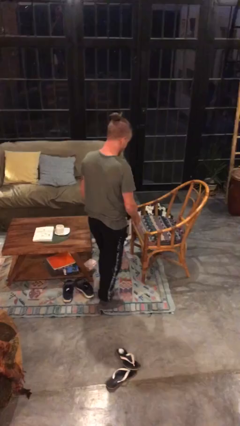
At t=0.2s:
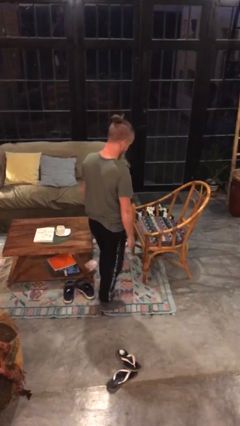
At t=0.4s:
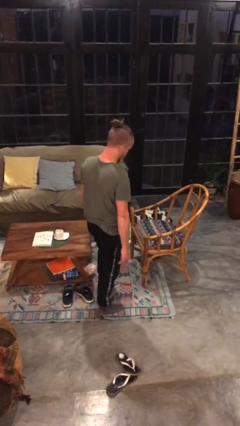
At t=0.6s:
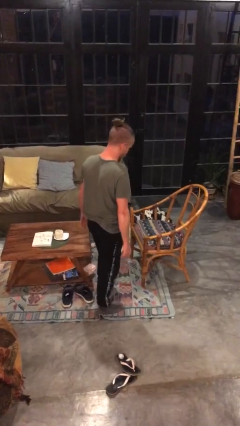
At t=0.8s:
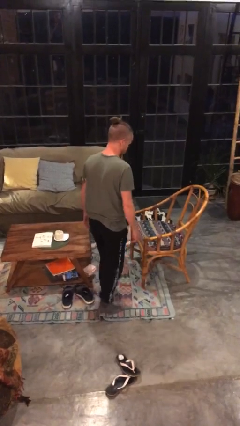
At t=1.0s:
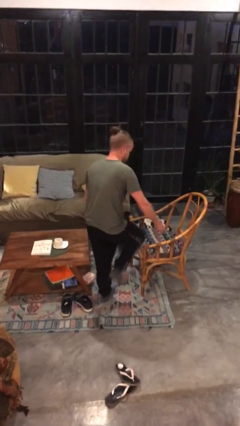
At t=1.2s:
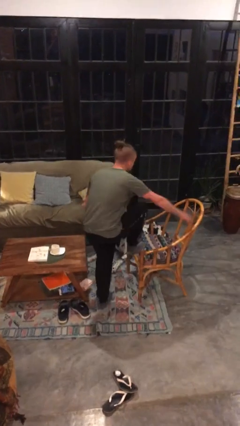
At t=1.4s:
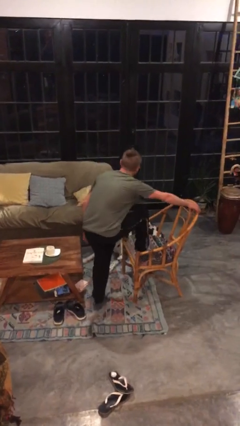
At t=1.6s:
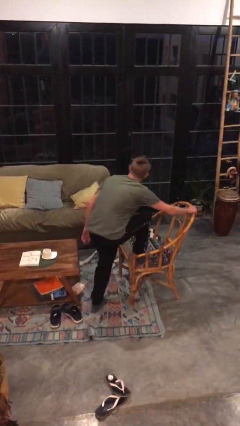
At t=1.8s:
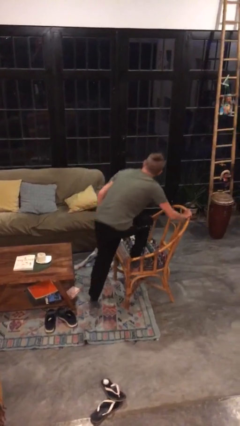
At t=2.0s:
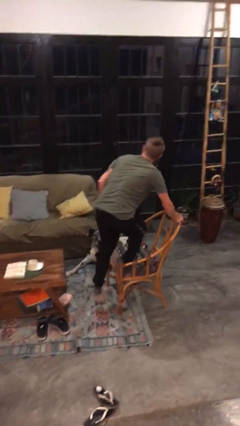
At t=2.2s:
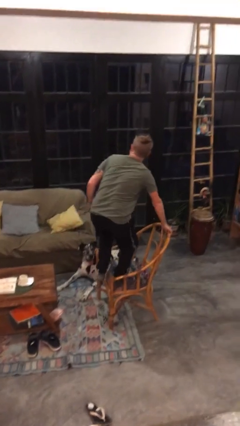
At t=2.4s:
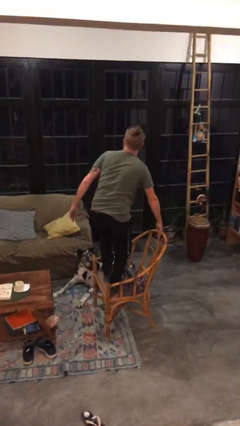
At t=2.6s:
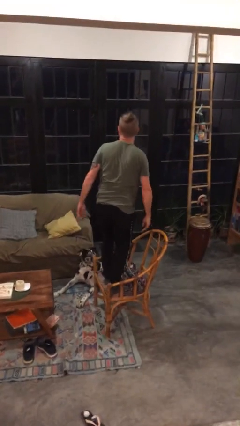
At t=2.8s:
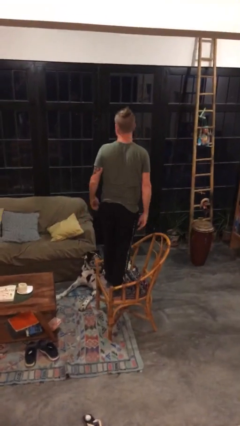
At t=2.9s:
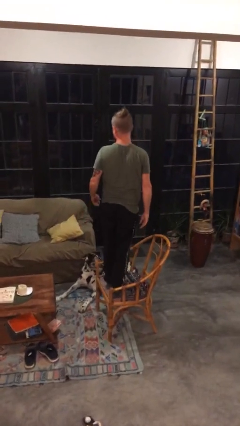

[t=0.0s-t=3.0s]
person climbs on chair

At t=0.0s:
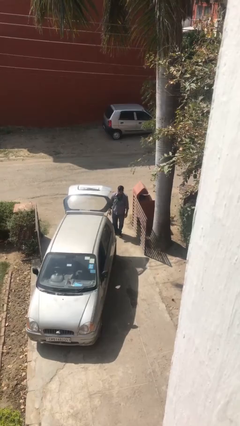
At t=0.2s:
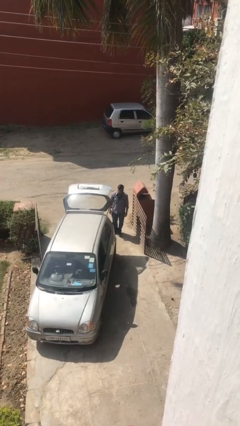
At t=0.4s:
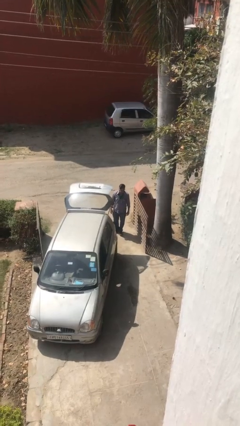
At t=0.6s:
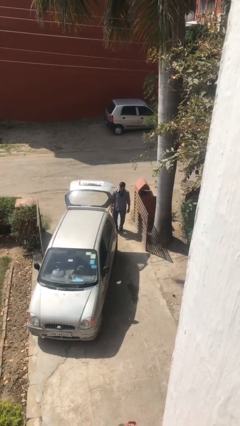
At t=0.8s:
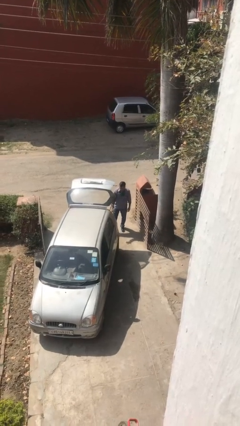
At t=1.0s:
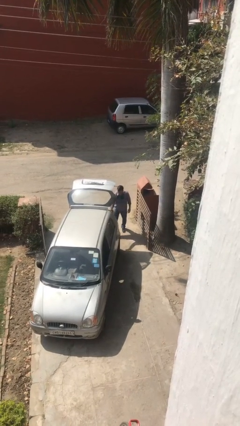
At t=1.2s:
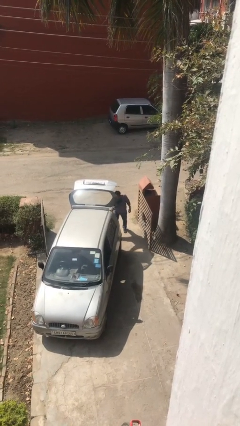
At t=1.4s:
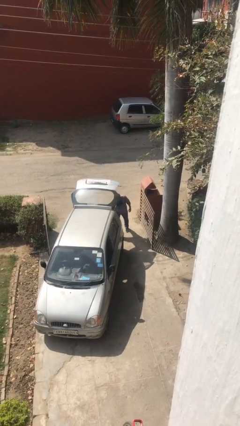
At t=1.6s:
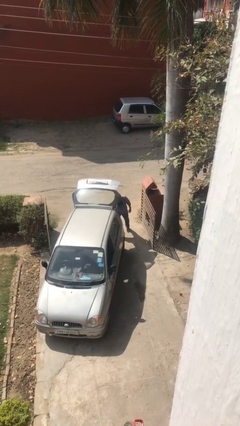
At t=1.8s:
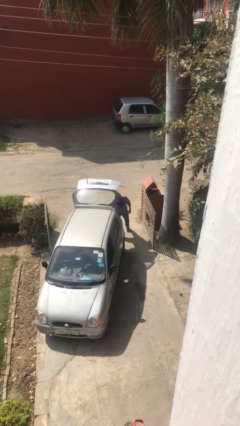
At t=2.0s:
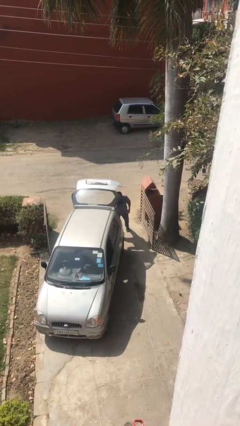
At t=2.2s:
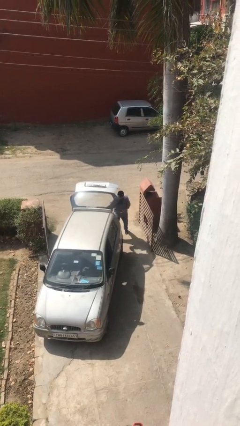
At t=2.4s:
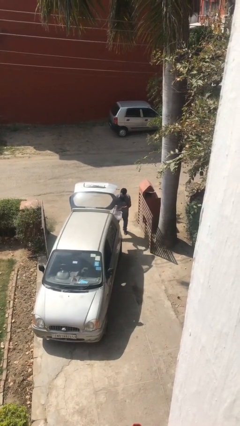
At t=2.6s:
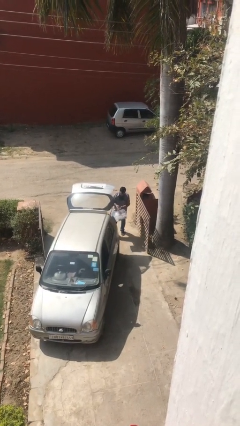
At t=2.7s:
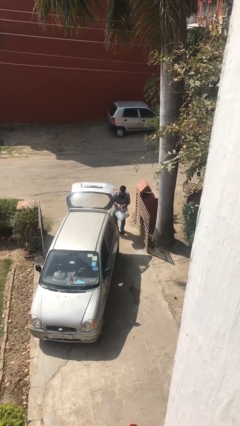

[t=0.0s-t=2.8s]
person unloads car

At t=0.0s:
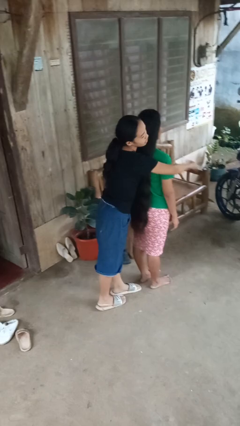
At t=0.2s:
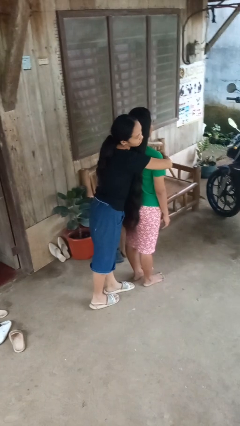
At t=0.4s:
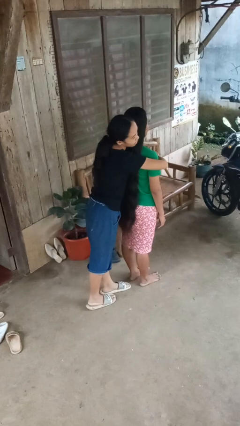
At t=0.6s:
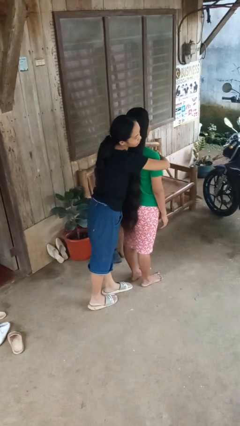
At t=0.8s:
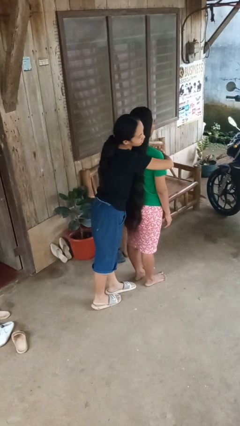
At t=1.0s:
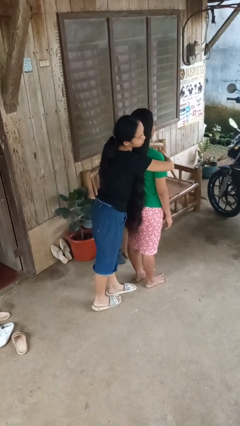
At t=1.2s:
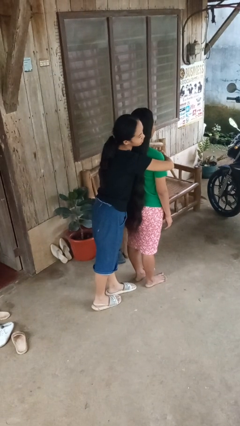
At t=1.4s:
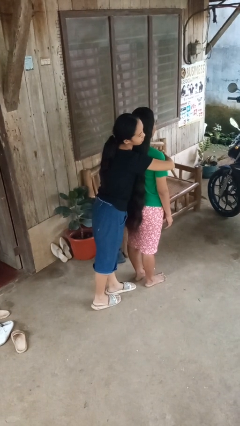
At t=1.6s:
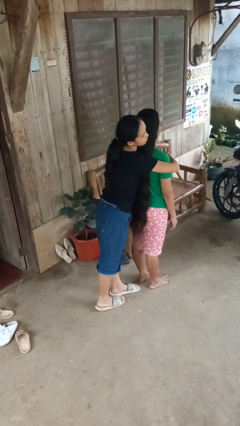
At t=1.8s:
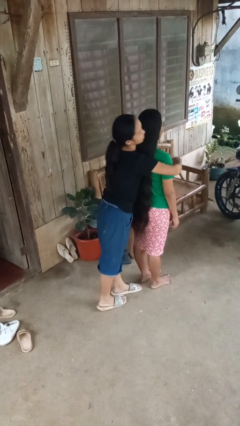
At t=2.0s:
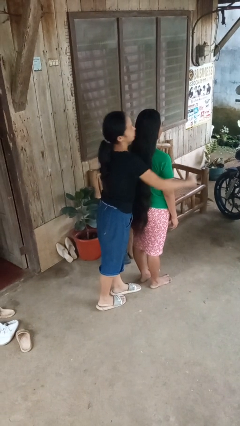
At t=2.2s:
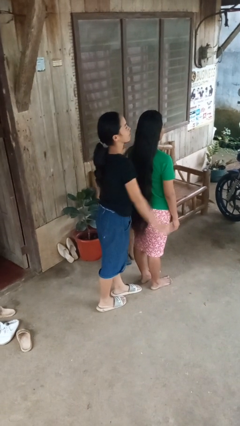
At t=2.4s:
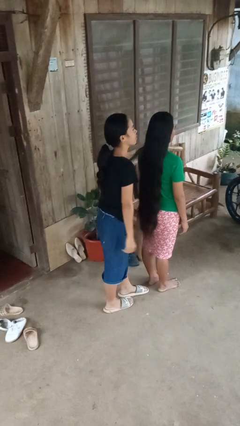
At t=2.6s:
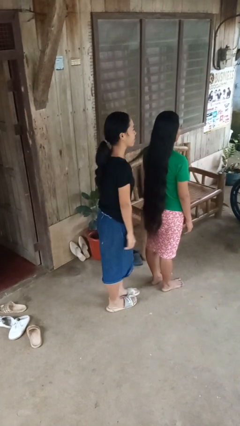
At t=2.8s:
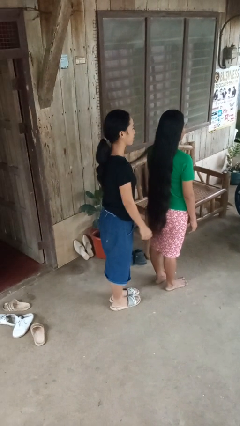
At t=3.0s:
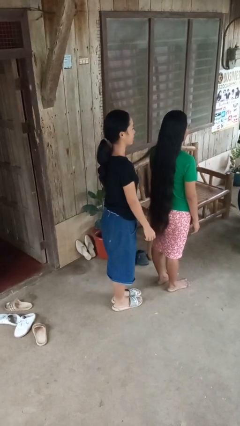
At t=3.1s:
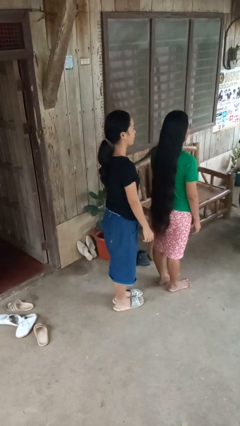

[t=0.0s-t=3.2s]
person hugs person from behind

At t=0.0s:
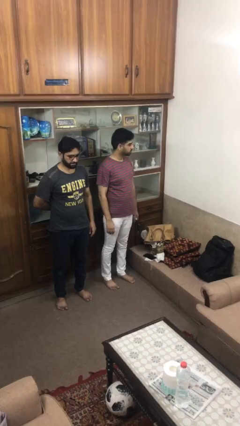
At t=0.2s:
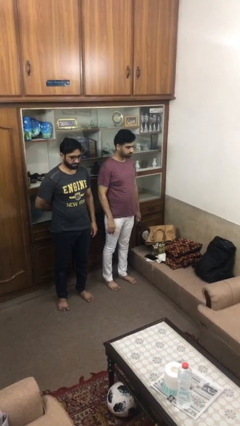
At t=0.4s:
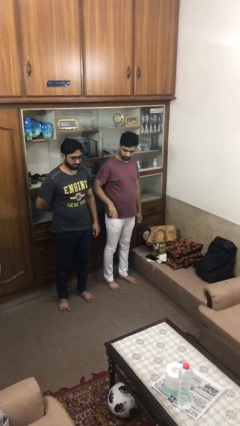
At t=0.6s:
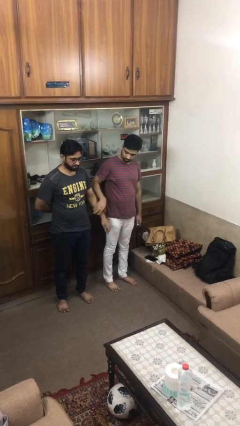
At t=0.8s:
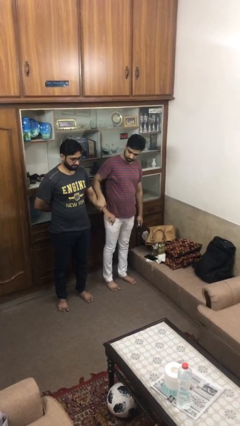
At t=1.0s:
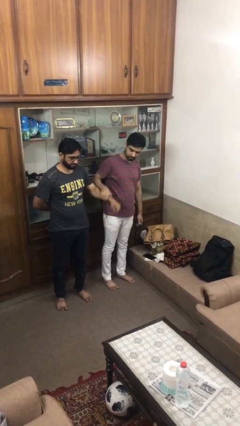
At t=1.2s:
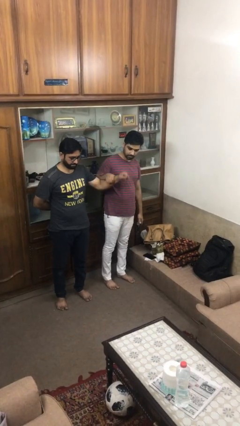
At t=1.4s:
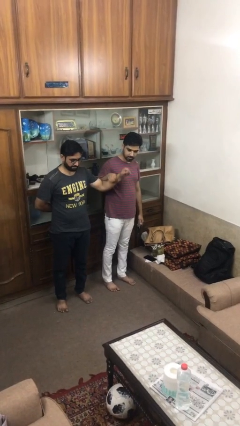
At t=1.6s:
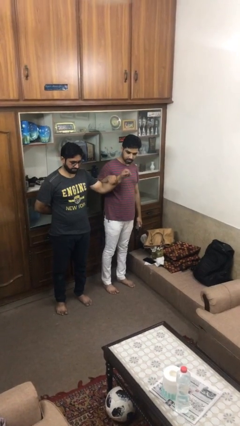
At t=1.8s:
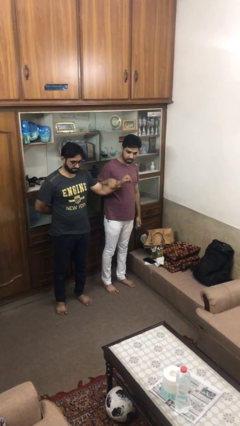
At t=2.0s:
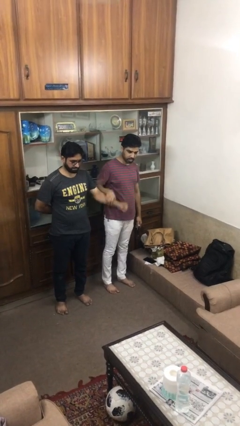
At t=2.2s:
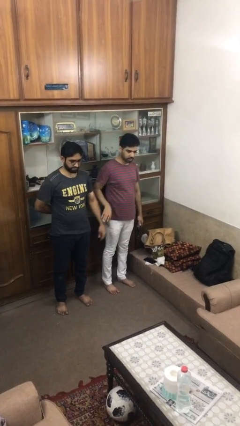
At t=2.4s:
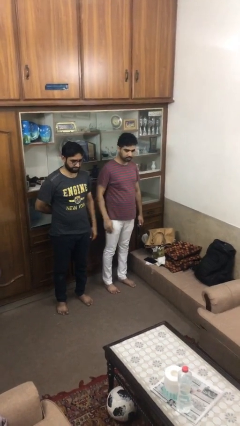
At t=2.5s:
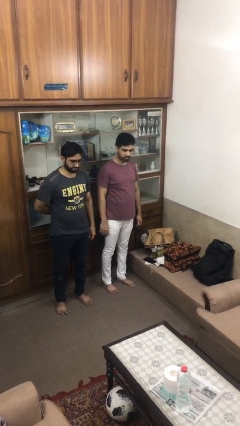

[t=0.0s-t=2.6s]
person grabs person by forearm

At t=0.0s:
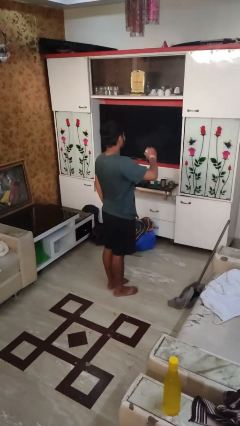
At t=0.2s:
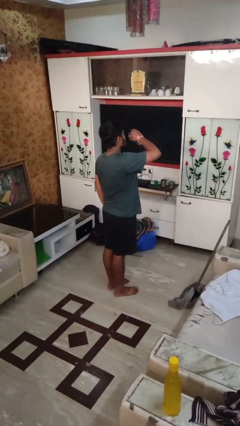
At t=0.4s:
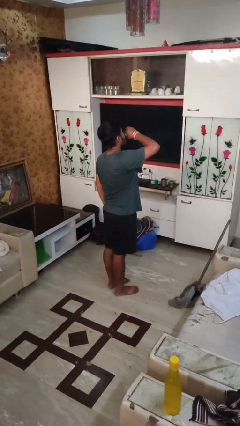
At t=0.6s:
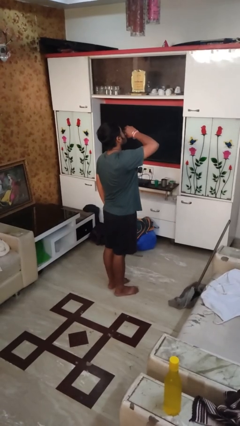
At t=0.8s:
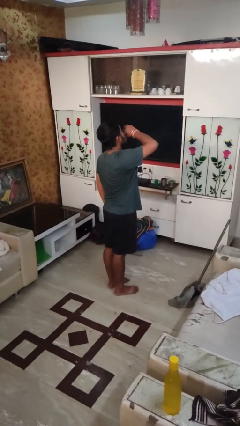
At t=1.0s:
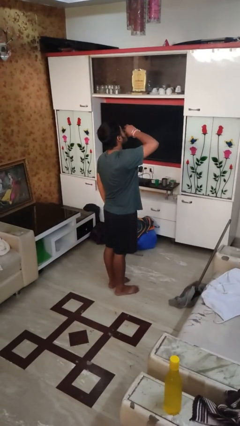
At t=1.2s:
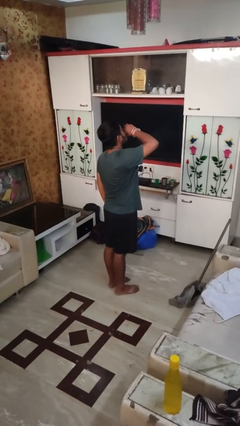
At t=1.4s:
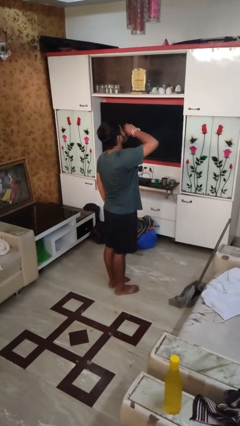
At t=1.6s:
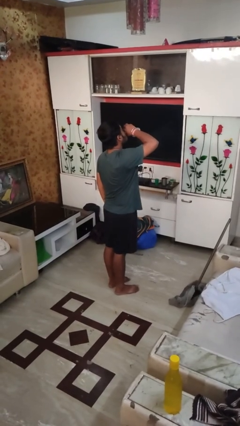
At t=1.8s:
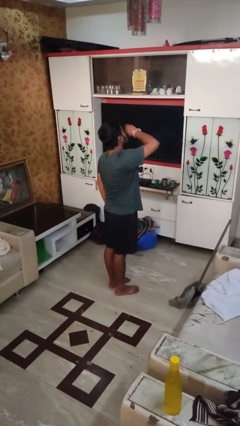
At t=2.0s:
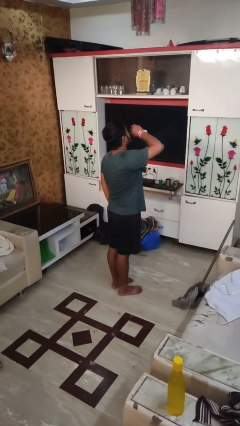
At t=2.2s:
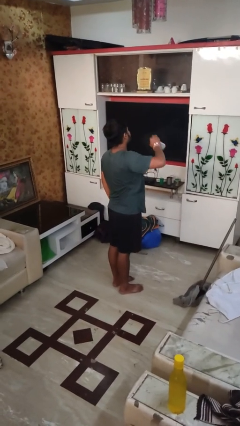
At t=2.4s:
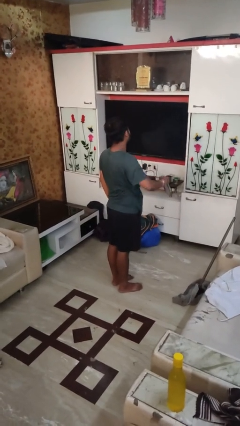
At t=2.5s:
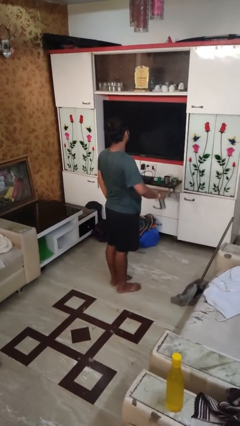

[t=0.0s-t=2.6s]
person drinks from beverage can

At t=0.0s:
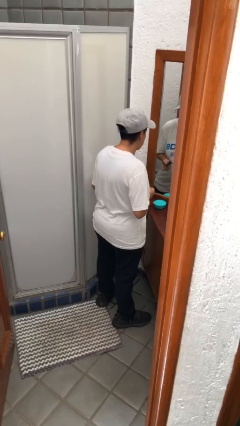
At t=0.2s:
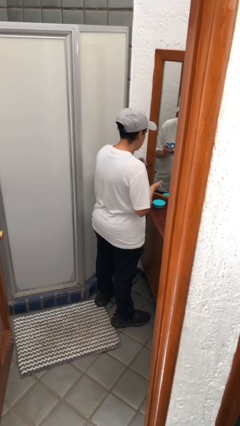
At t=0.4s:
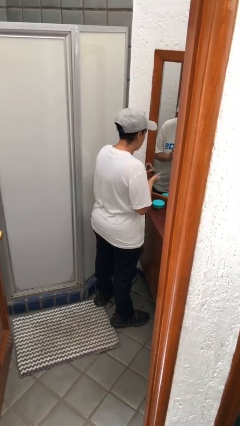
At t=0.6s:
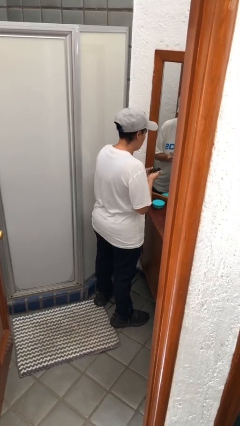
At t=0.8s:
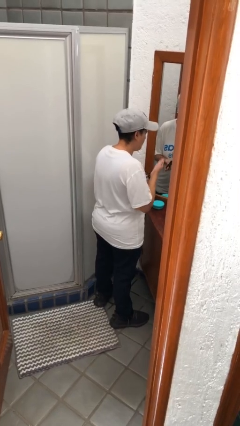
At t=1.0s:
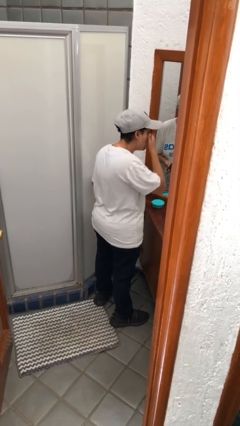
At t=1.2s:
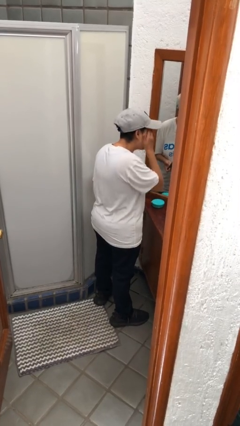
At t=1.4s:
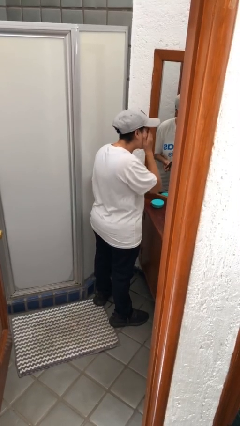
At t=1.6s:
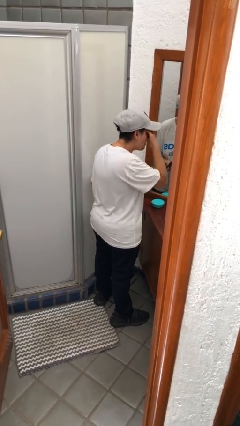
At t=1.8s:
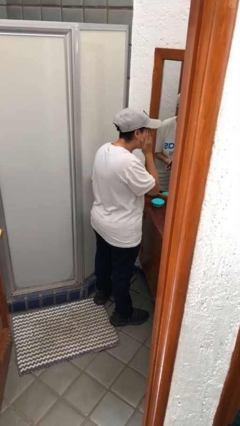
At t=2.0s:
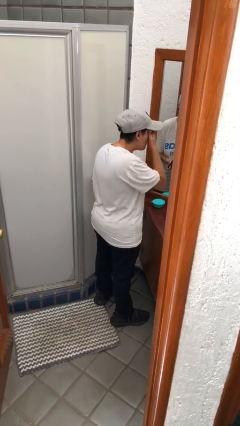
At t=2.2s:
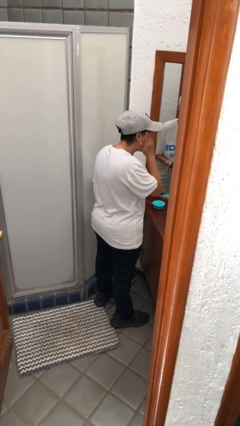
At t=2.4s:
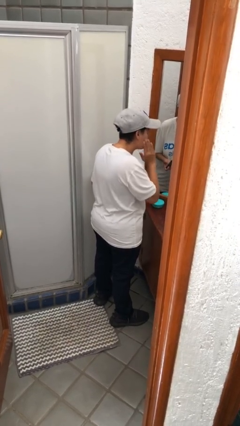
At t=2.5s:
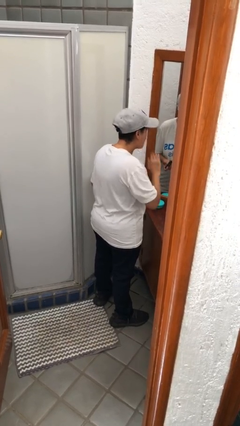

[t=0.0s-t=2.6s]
person applies facial moisturizer

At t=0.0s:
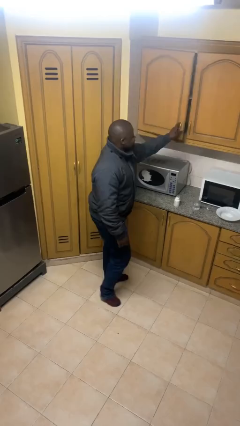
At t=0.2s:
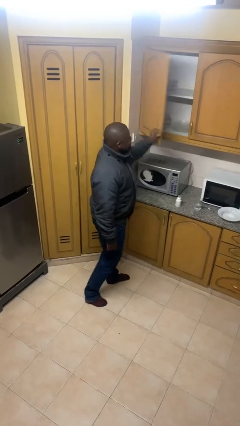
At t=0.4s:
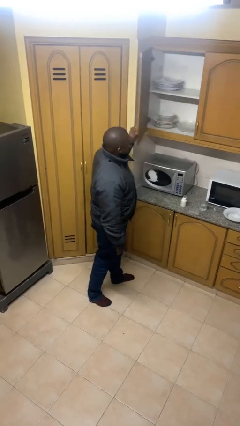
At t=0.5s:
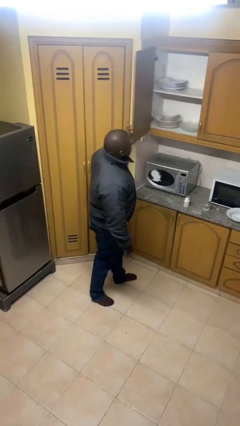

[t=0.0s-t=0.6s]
person closes cabinet
